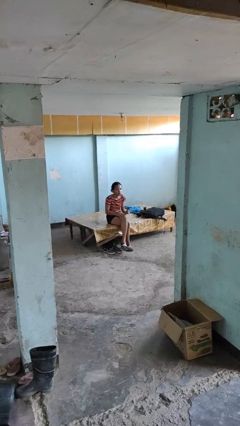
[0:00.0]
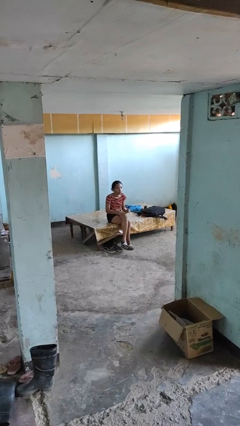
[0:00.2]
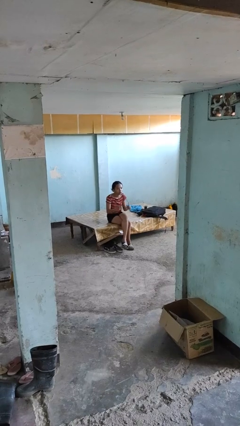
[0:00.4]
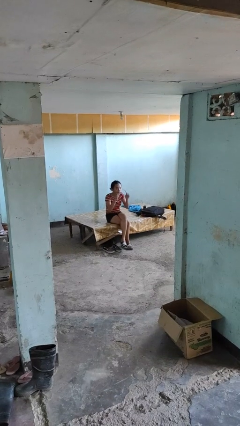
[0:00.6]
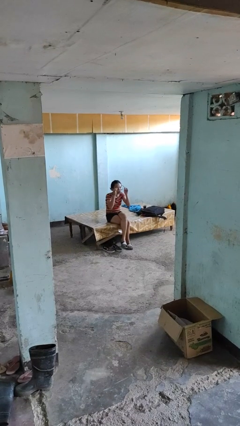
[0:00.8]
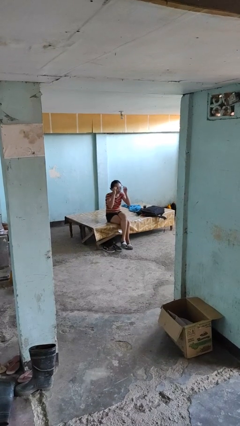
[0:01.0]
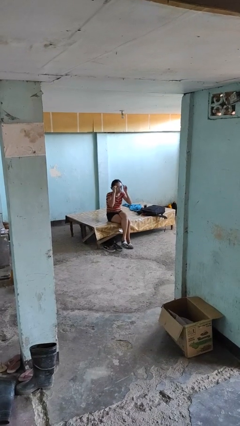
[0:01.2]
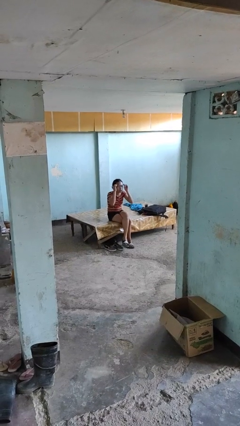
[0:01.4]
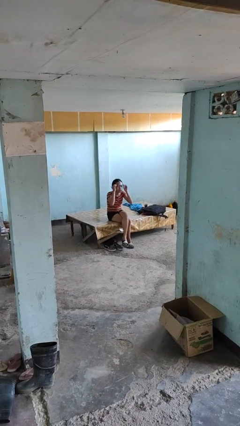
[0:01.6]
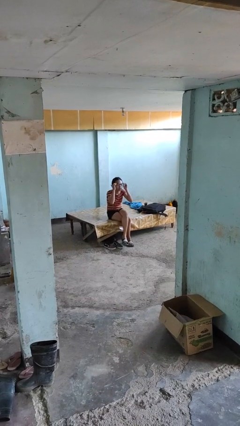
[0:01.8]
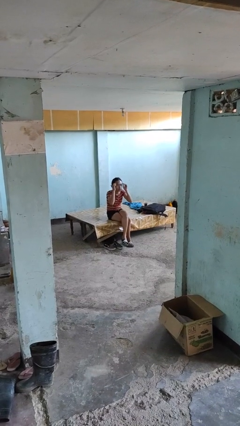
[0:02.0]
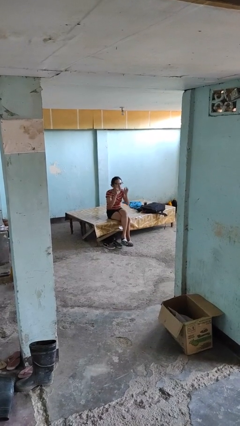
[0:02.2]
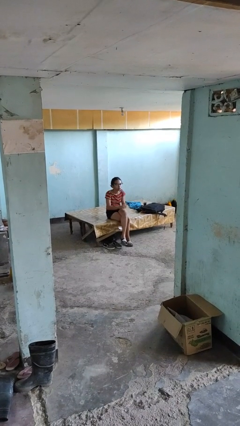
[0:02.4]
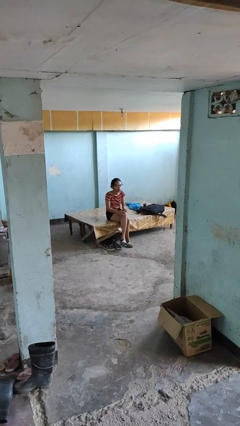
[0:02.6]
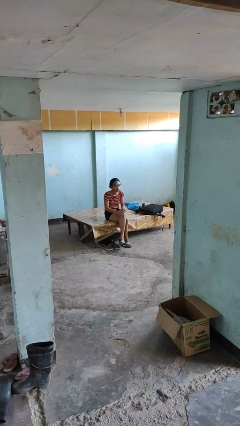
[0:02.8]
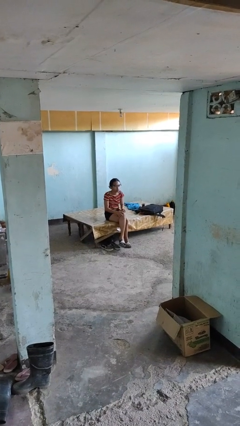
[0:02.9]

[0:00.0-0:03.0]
person puts on glasses

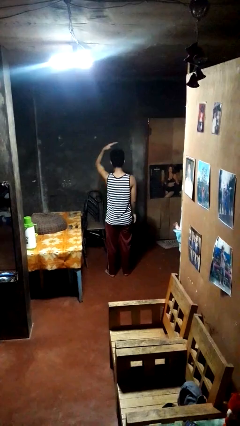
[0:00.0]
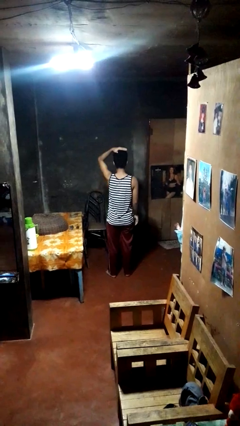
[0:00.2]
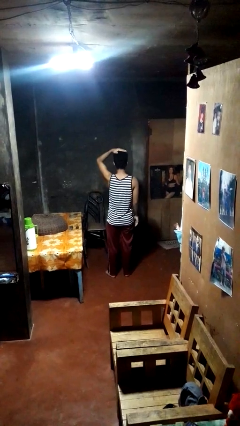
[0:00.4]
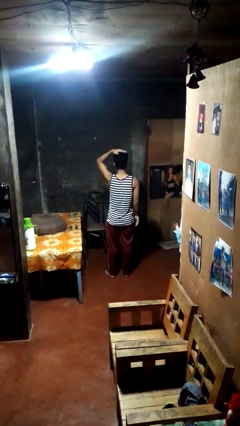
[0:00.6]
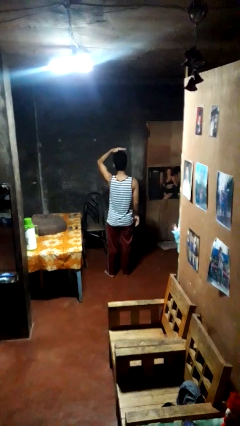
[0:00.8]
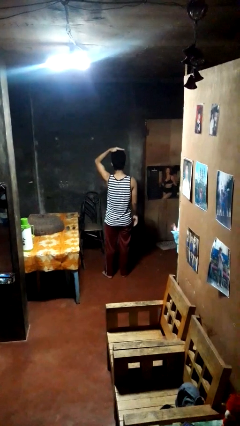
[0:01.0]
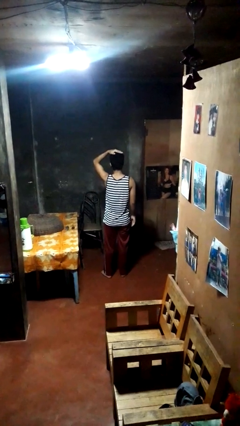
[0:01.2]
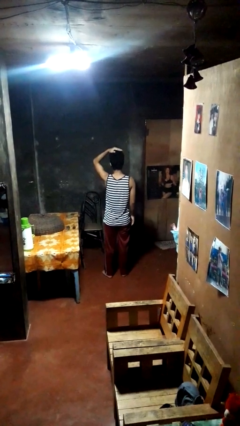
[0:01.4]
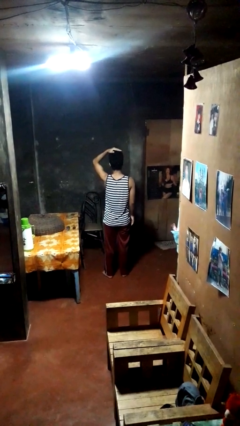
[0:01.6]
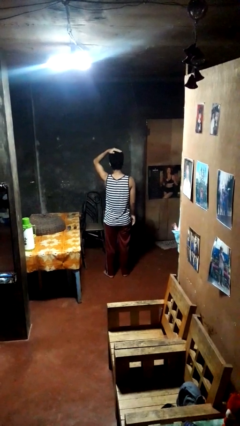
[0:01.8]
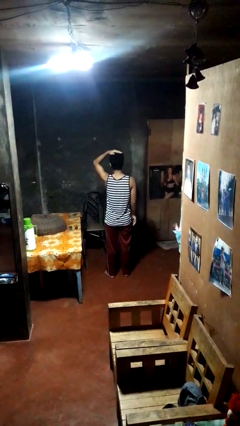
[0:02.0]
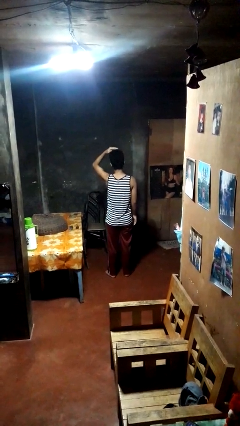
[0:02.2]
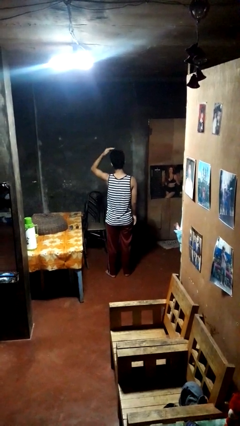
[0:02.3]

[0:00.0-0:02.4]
person pats head

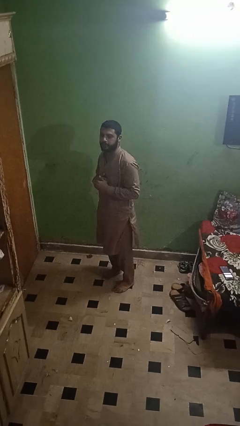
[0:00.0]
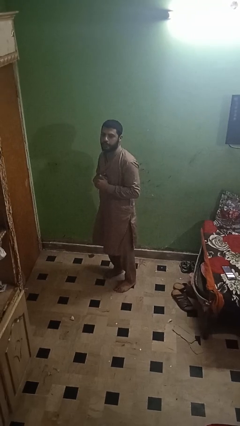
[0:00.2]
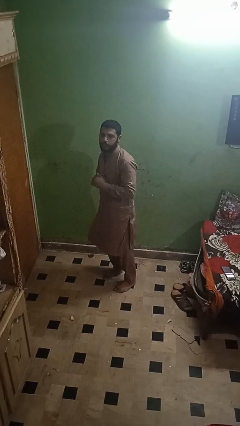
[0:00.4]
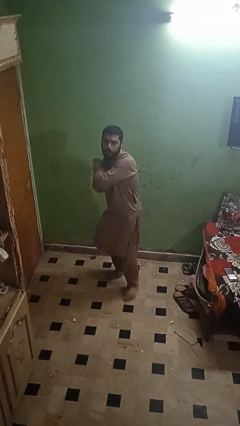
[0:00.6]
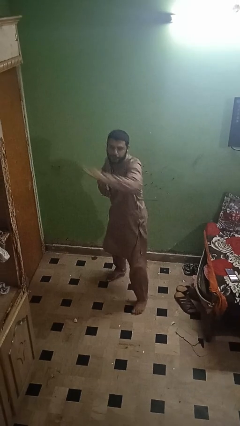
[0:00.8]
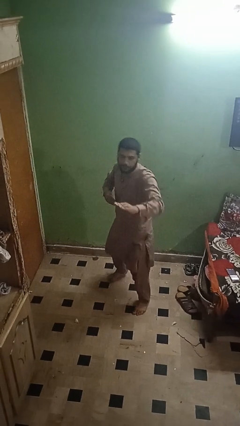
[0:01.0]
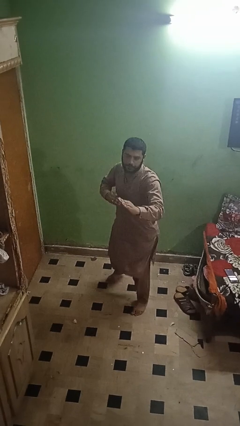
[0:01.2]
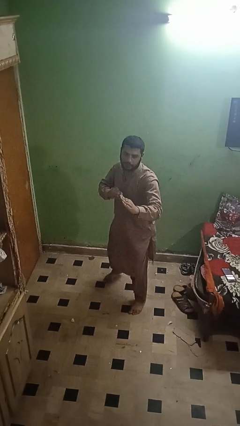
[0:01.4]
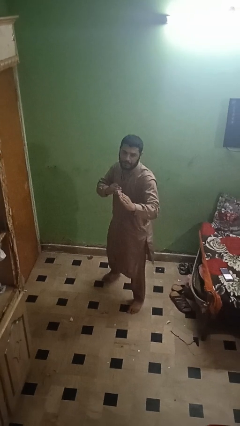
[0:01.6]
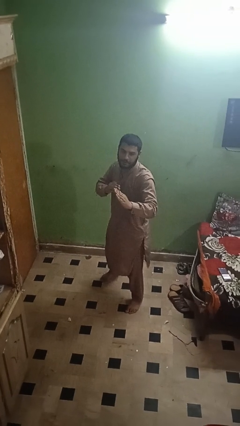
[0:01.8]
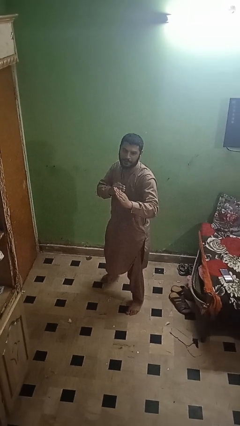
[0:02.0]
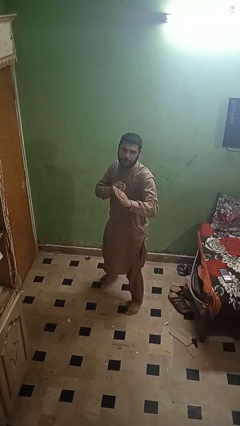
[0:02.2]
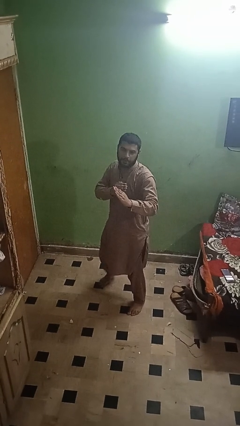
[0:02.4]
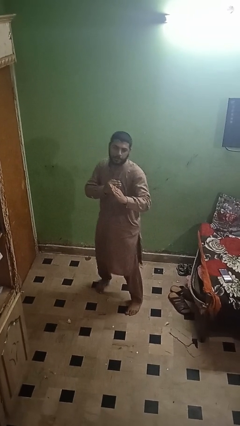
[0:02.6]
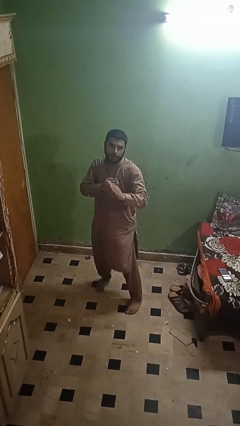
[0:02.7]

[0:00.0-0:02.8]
person karate chop

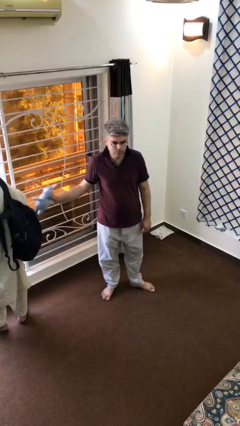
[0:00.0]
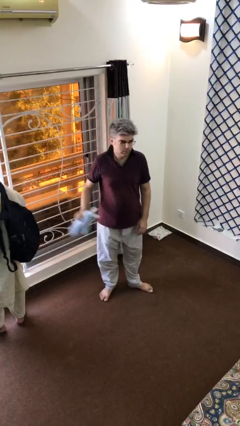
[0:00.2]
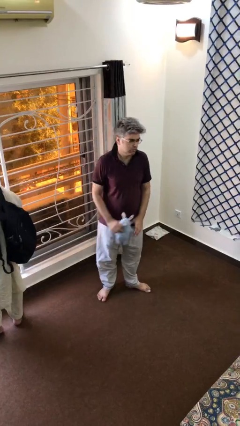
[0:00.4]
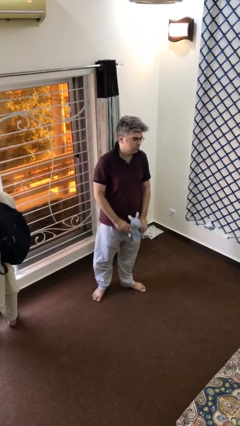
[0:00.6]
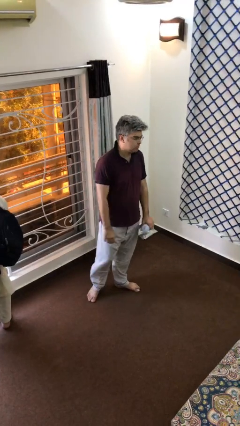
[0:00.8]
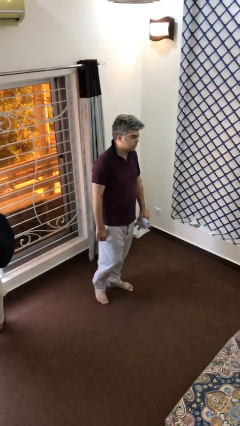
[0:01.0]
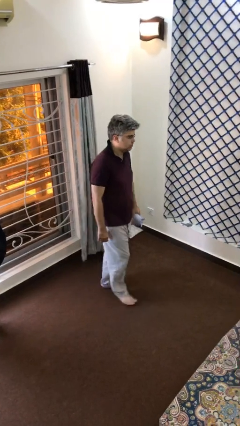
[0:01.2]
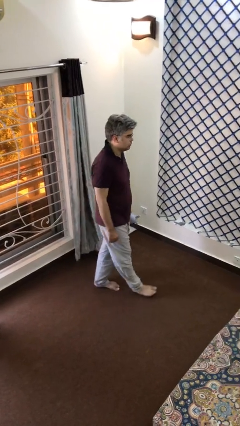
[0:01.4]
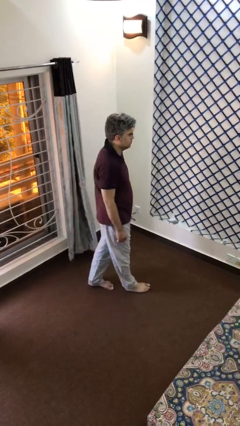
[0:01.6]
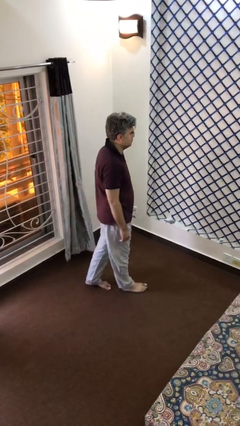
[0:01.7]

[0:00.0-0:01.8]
person steals object from person

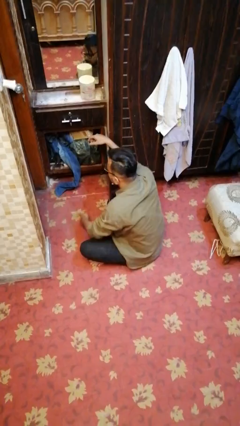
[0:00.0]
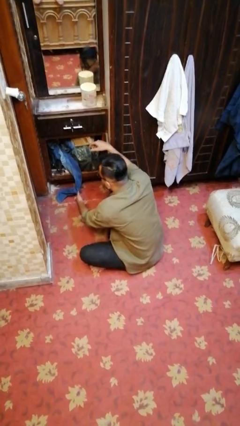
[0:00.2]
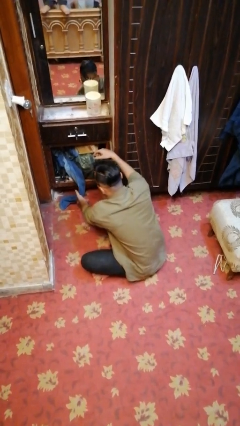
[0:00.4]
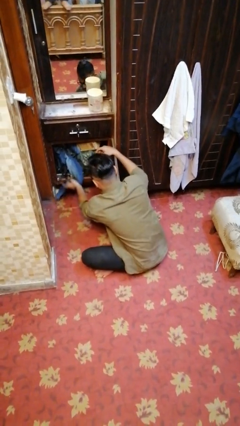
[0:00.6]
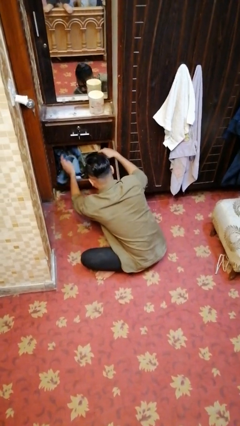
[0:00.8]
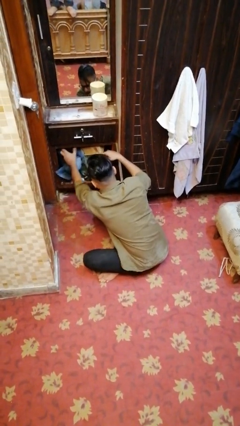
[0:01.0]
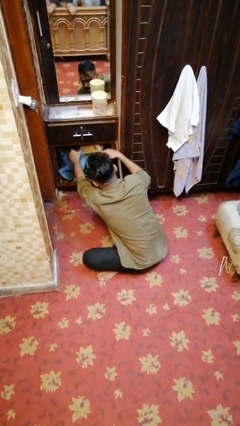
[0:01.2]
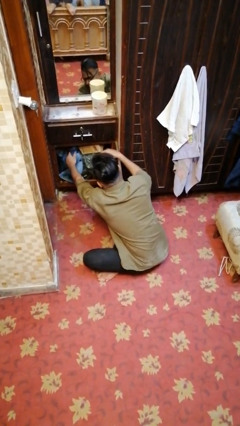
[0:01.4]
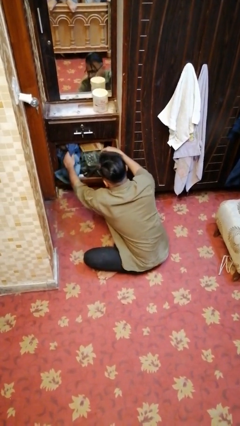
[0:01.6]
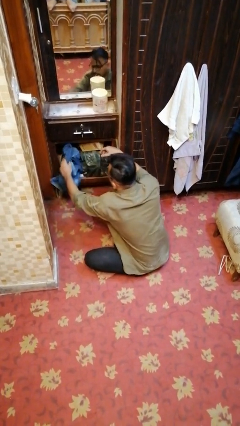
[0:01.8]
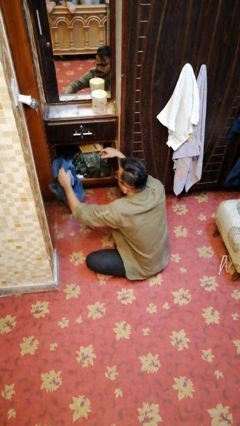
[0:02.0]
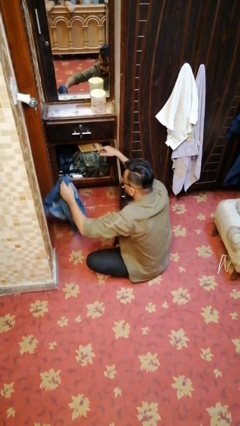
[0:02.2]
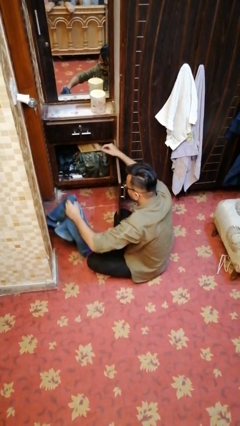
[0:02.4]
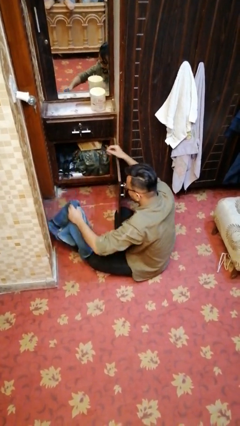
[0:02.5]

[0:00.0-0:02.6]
person takes clothes from dresser

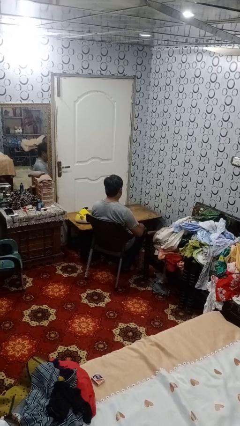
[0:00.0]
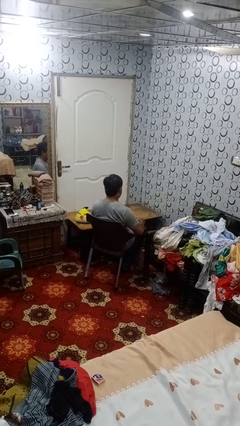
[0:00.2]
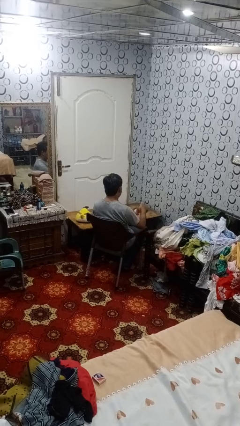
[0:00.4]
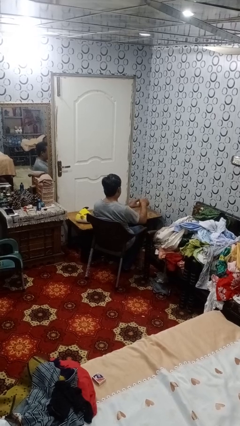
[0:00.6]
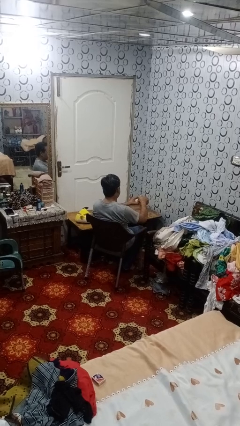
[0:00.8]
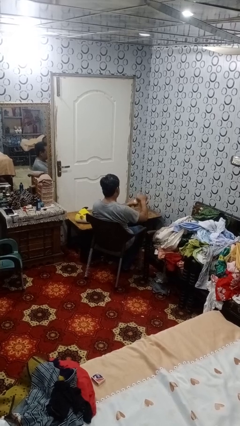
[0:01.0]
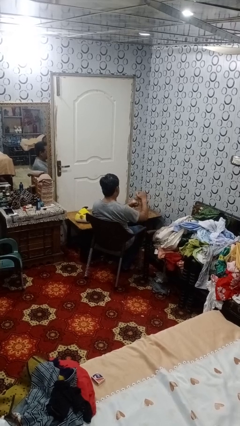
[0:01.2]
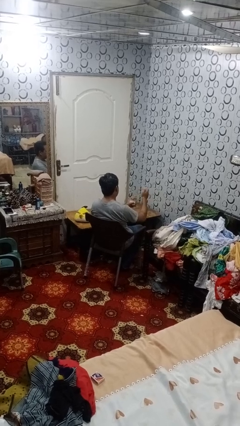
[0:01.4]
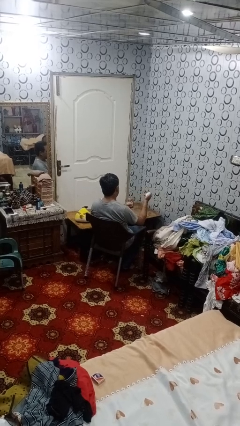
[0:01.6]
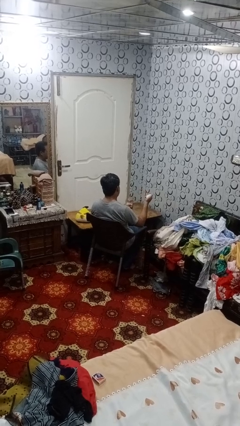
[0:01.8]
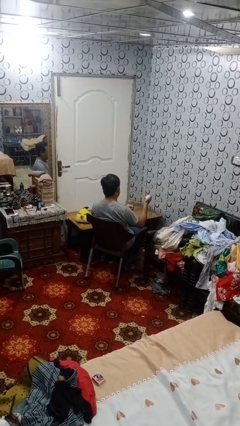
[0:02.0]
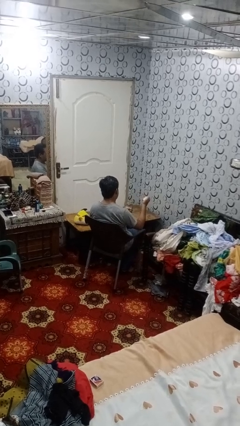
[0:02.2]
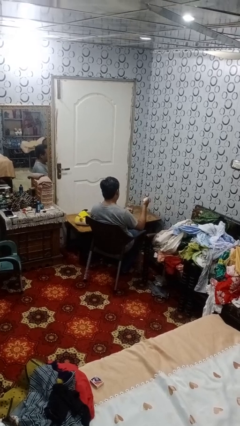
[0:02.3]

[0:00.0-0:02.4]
person opens jar

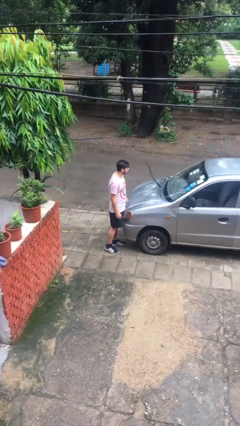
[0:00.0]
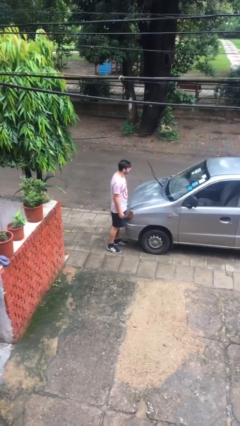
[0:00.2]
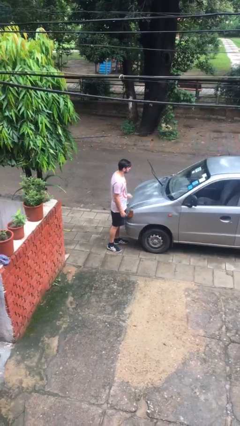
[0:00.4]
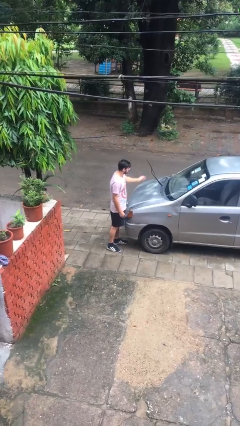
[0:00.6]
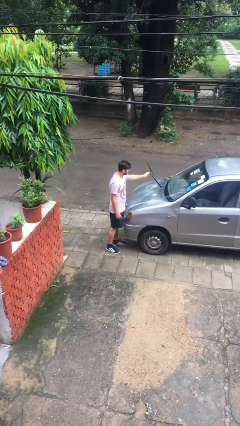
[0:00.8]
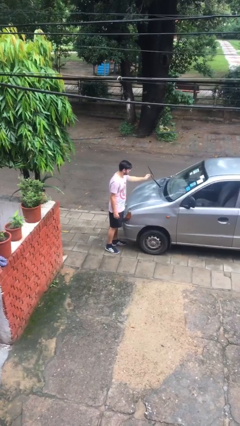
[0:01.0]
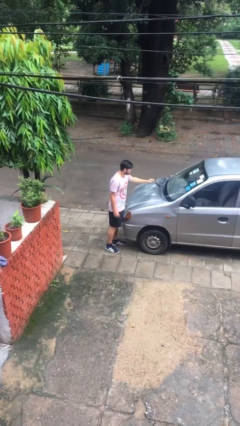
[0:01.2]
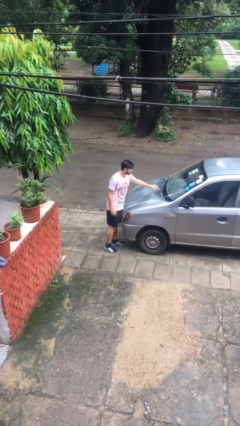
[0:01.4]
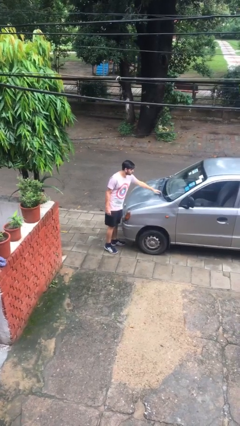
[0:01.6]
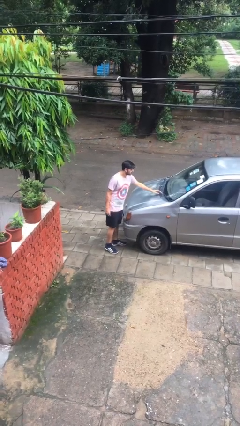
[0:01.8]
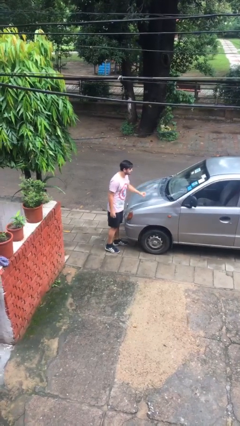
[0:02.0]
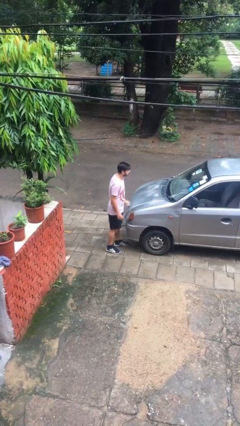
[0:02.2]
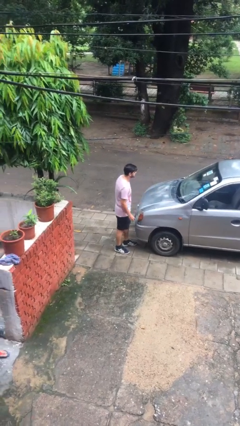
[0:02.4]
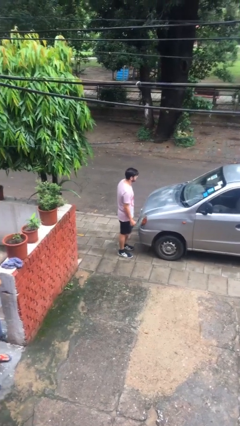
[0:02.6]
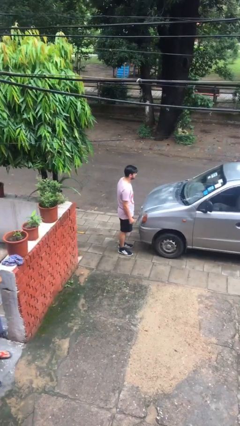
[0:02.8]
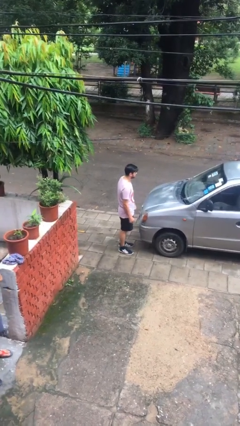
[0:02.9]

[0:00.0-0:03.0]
person flips down car wipers
